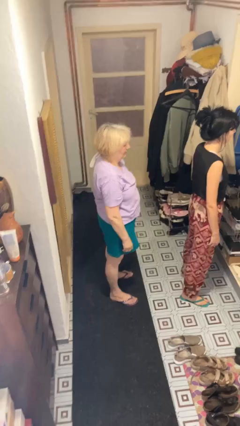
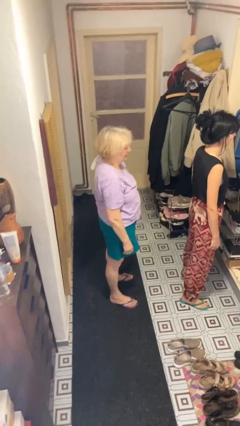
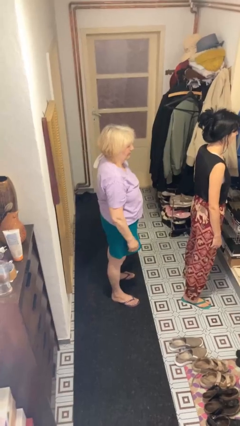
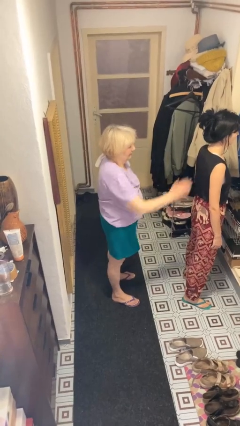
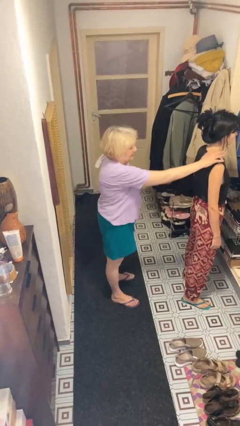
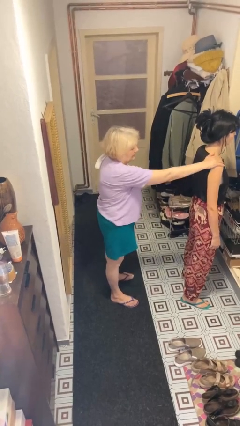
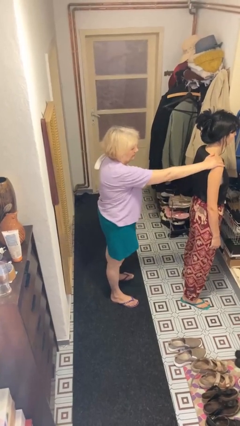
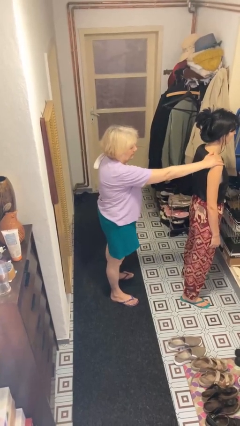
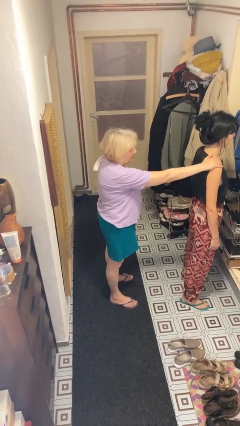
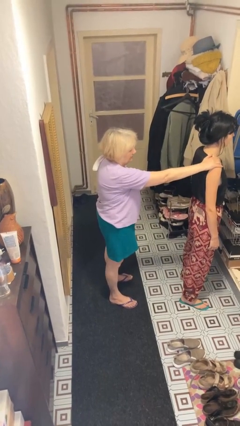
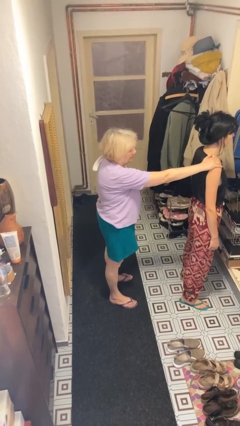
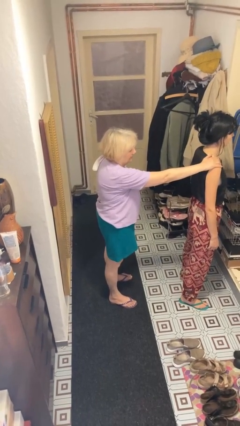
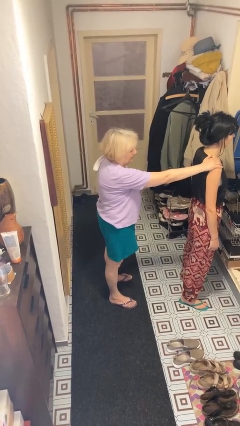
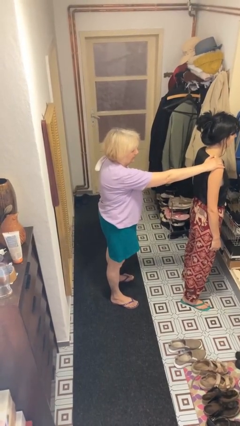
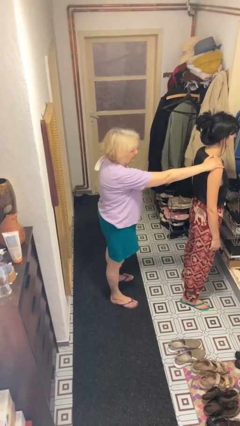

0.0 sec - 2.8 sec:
person grabs person by shoulder

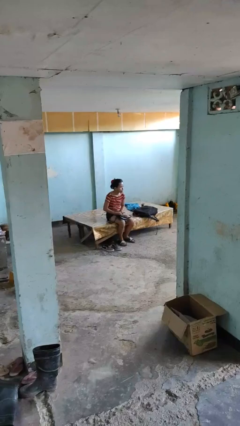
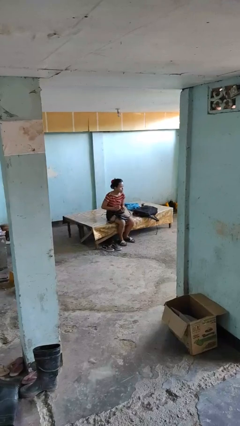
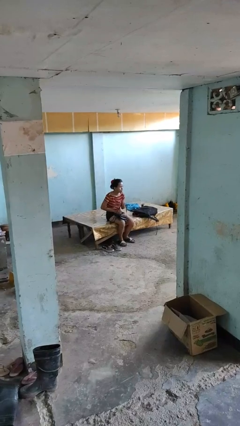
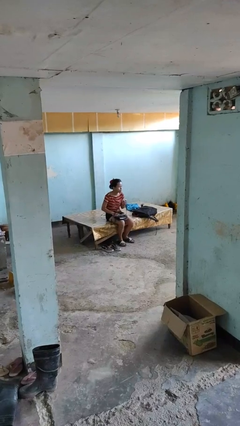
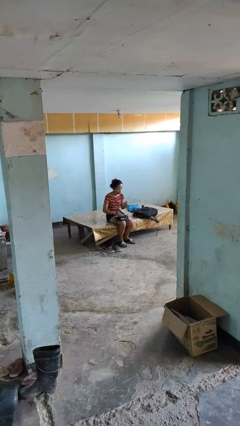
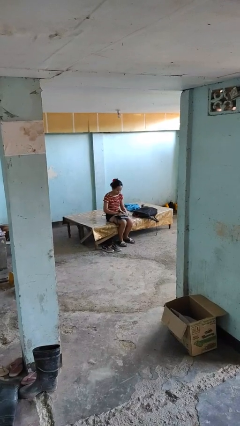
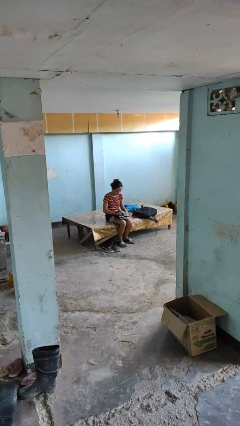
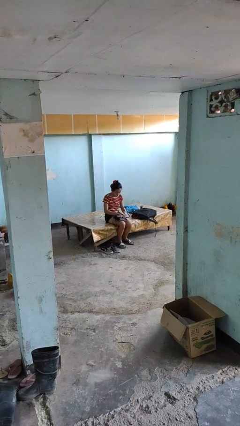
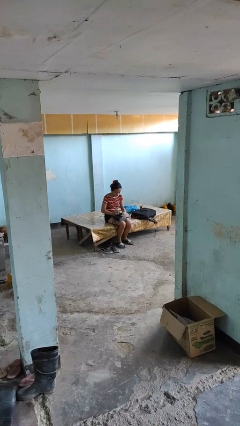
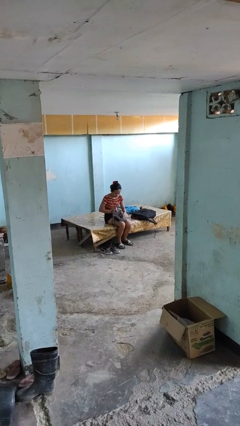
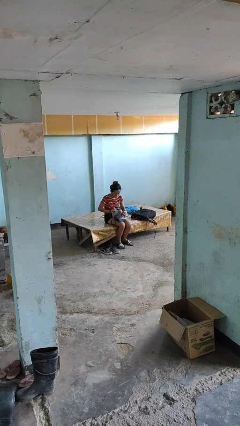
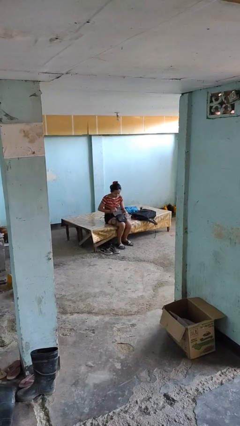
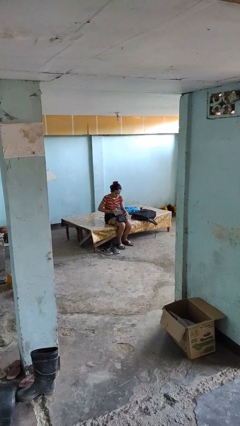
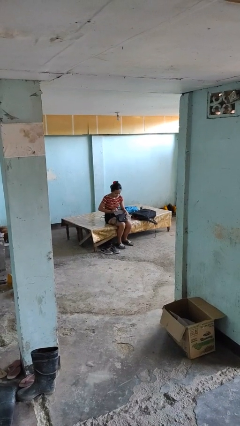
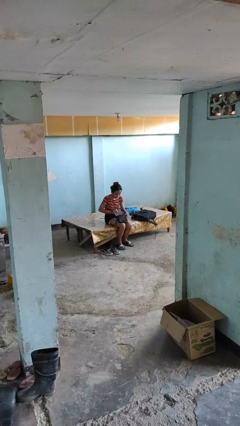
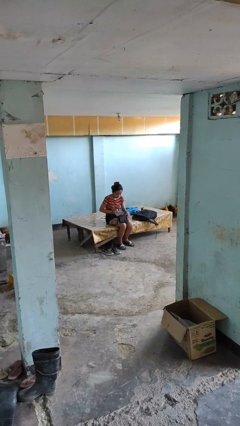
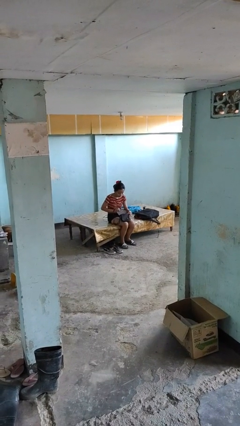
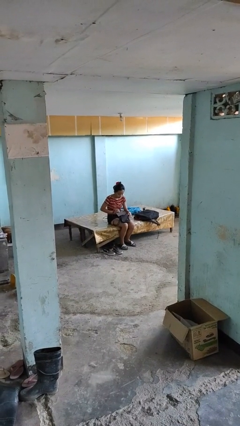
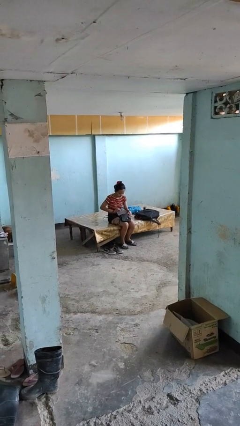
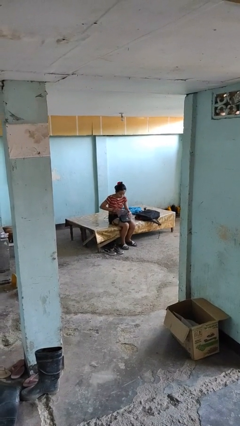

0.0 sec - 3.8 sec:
person searches in purse

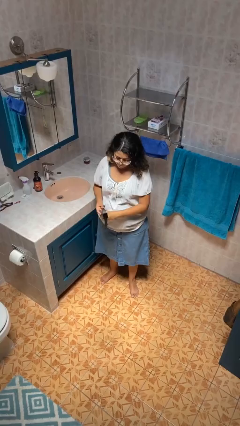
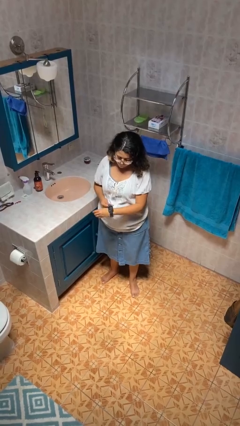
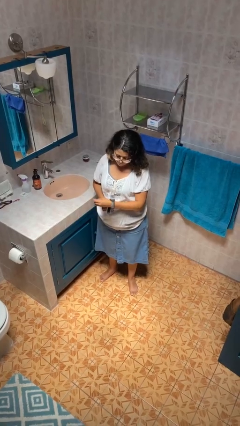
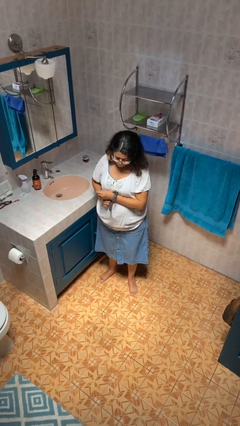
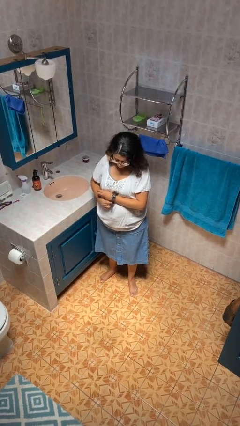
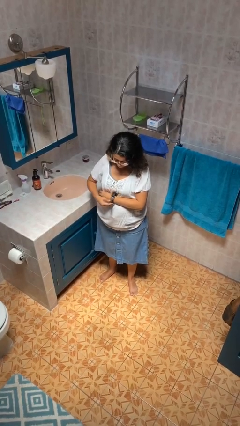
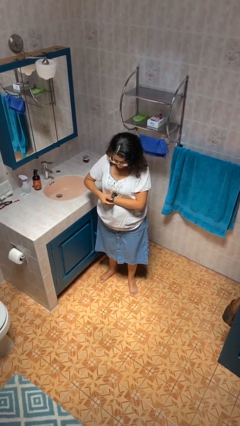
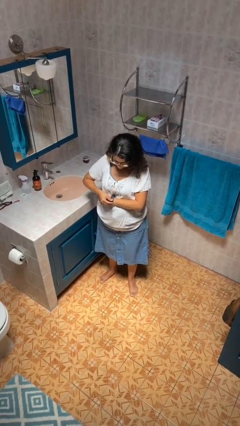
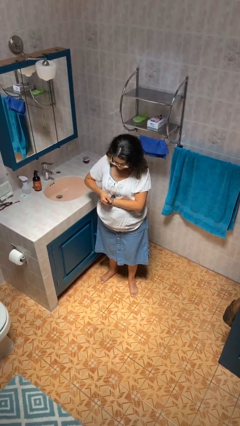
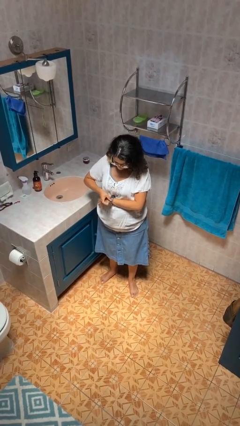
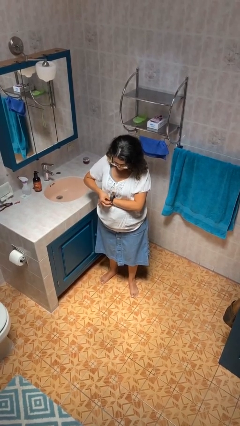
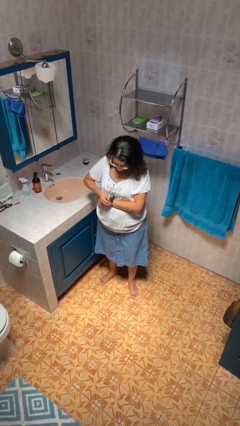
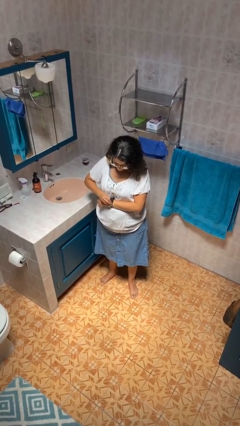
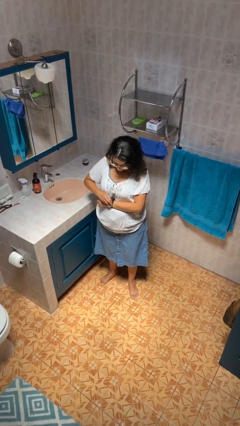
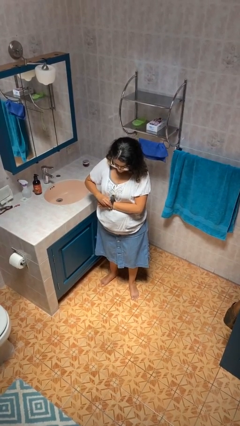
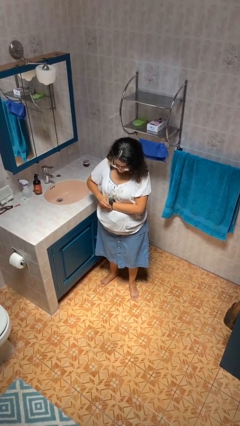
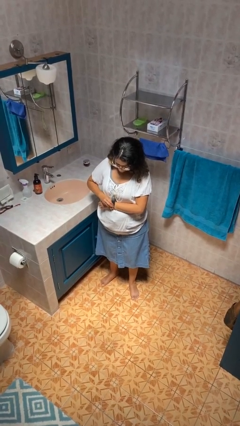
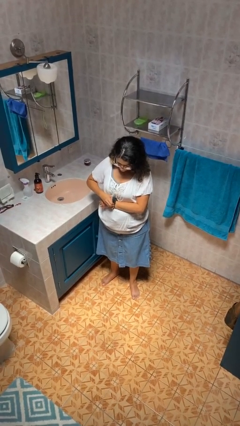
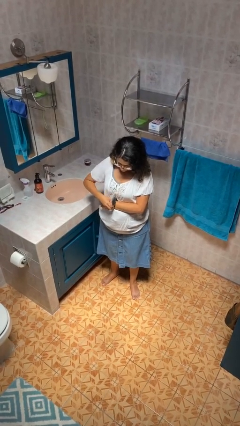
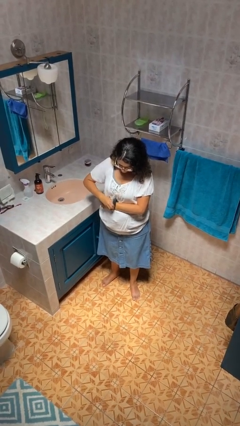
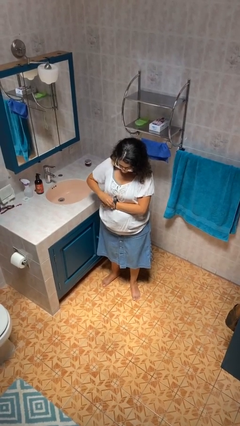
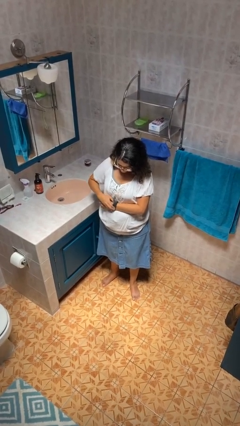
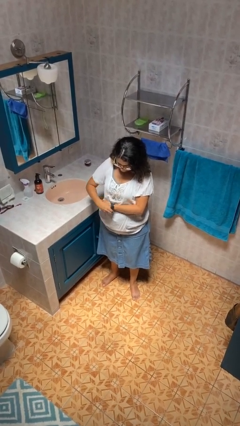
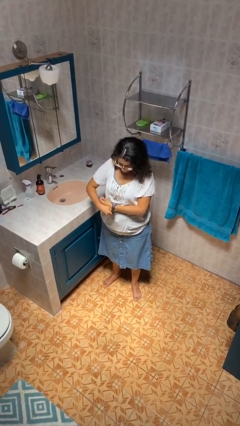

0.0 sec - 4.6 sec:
person puts on wristwatch

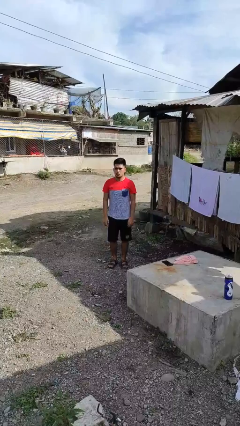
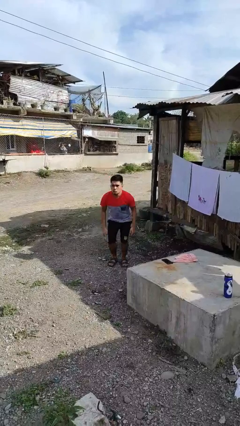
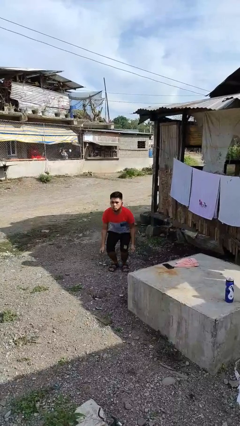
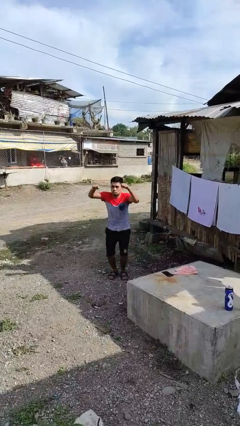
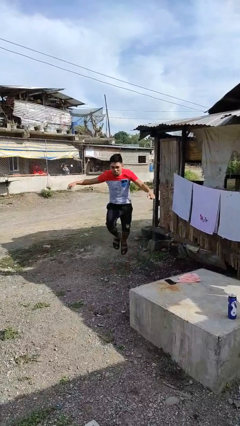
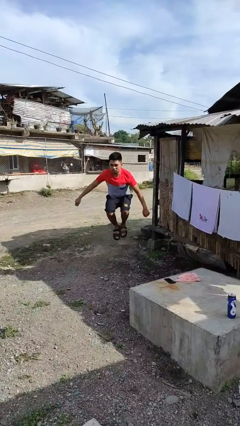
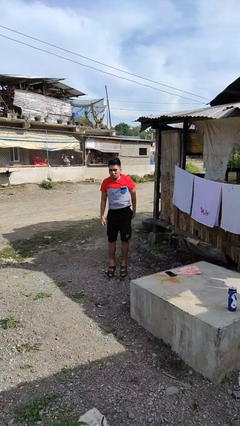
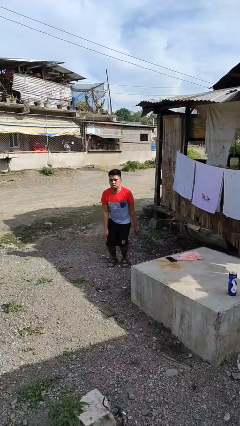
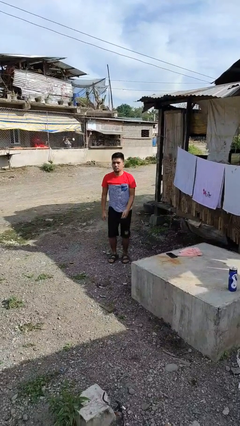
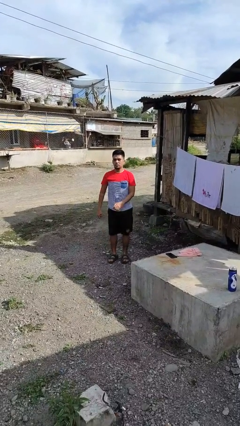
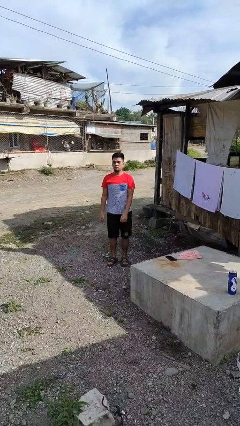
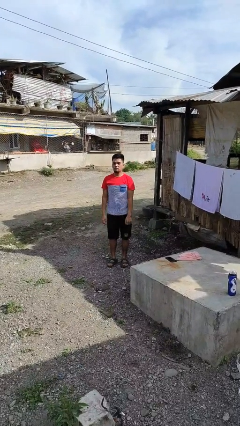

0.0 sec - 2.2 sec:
person jumps

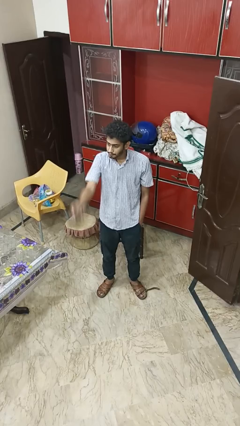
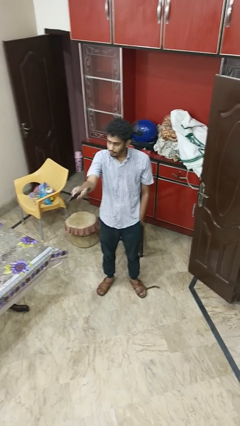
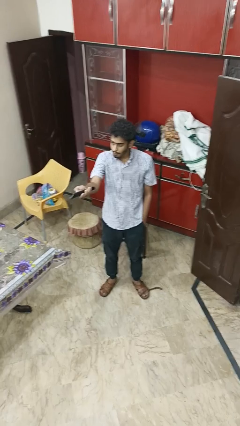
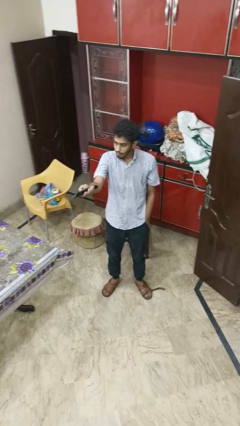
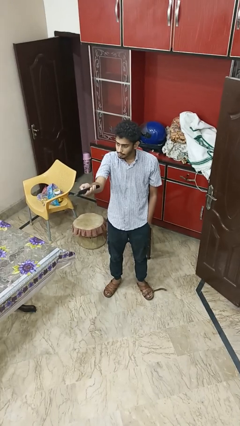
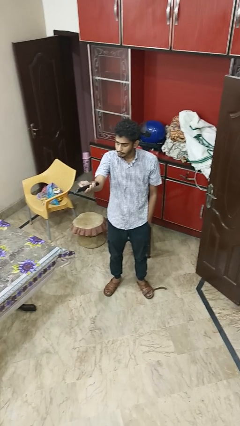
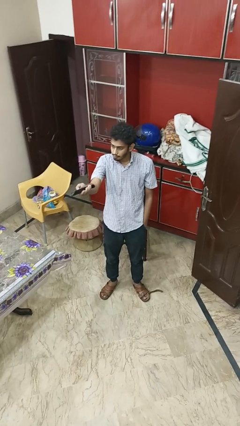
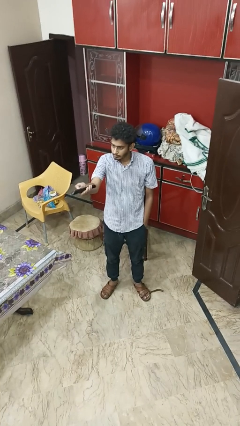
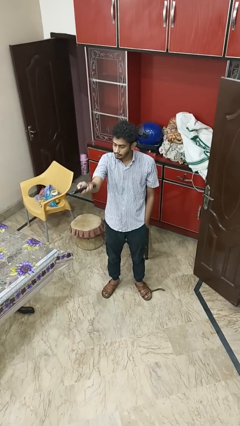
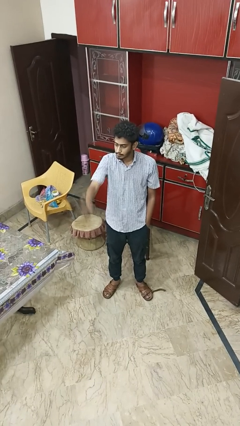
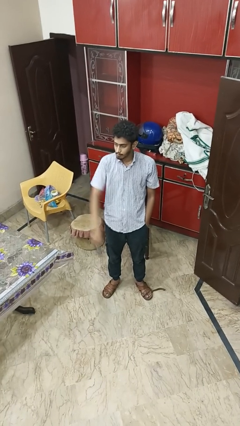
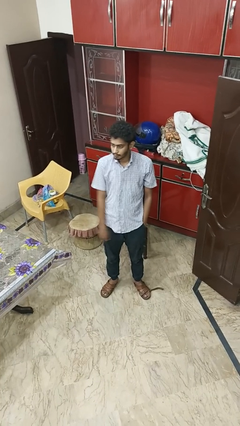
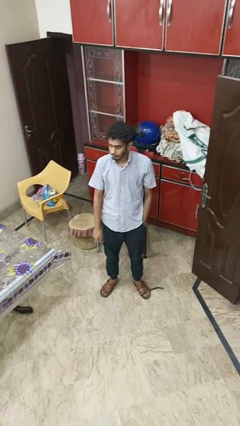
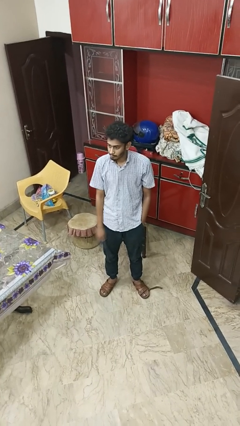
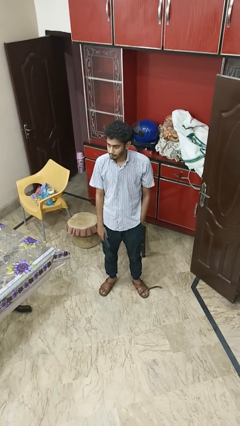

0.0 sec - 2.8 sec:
person uses television remote

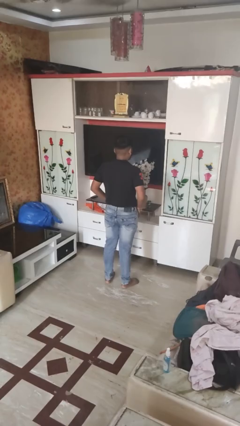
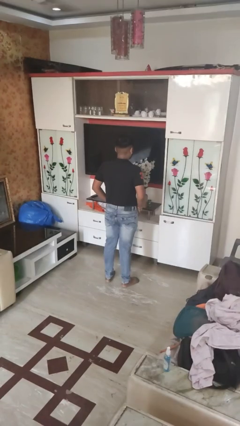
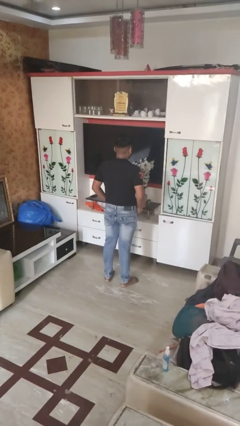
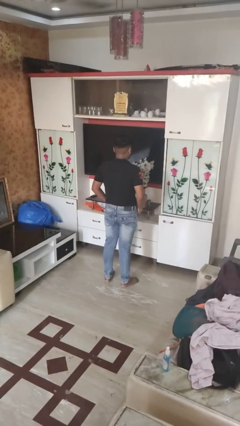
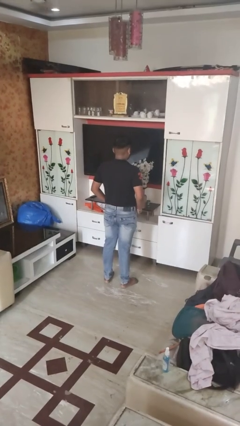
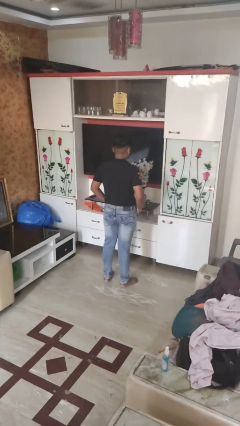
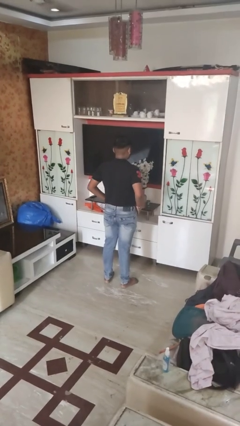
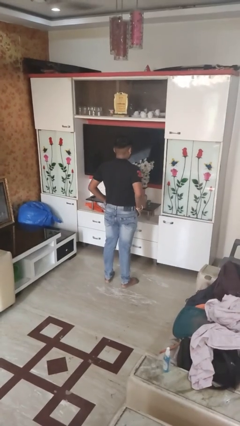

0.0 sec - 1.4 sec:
person puts hands in back pockets
